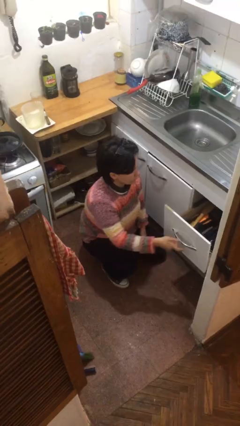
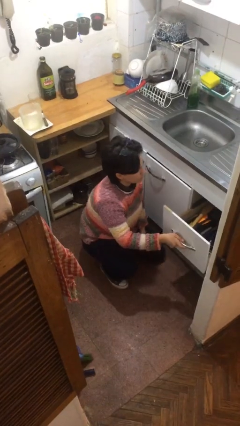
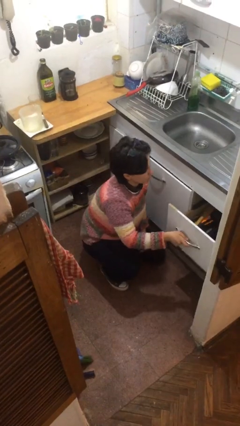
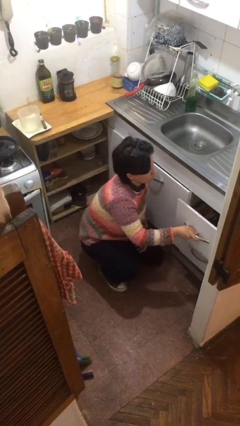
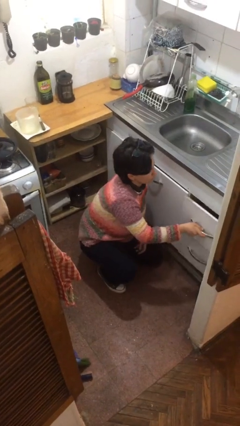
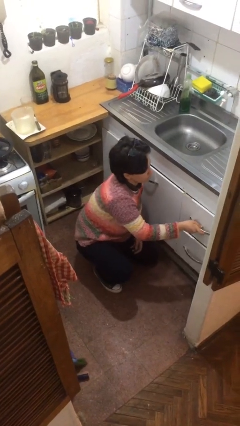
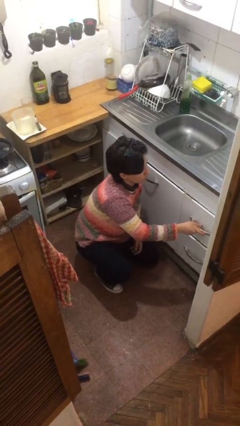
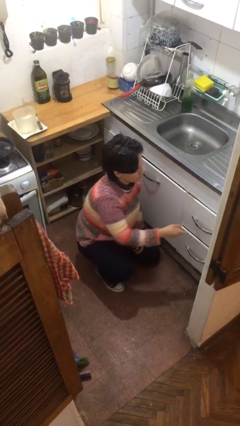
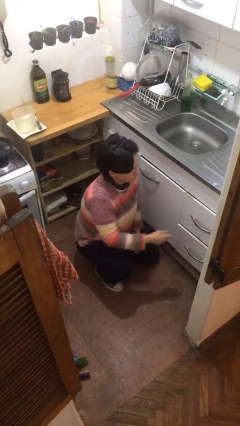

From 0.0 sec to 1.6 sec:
person closes kitchen drawer

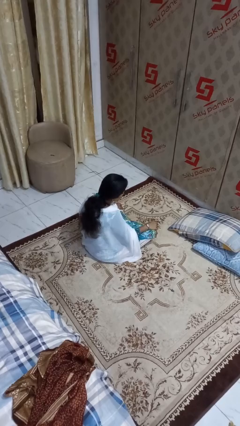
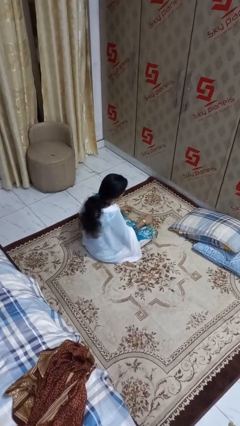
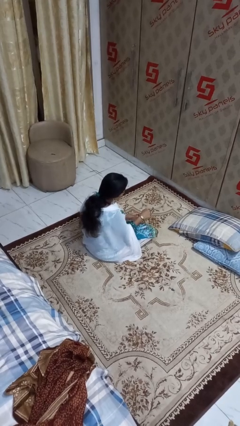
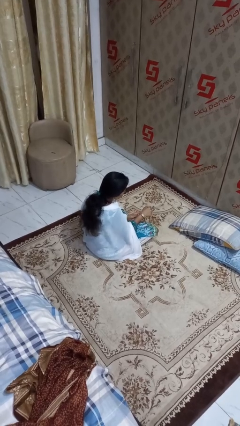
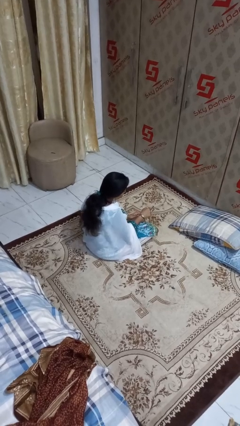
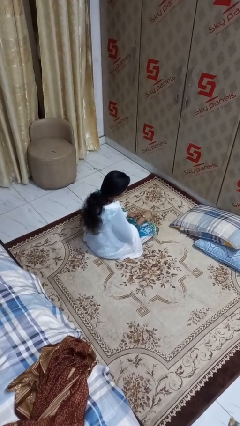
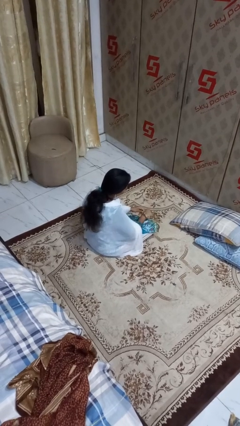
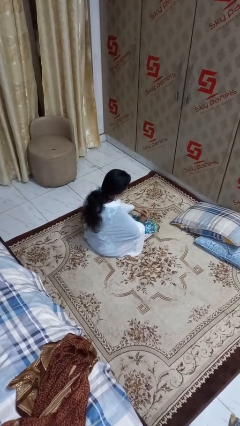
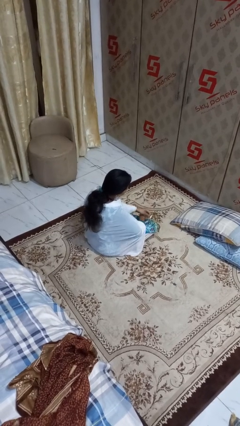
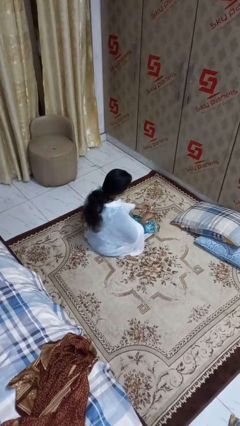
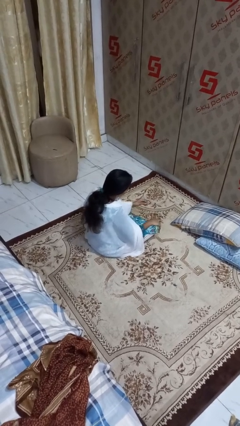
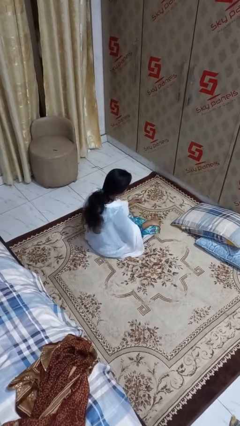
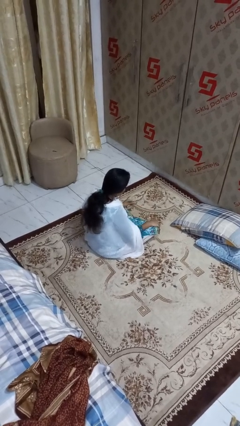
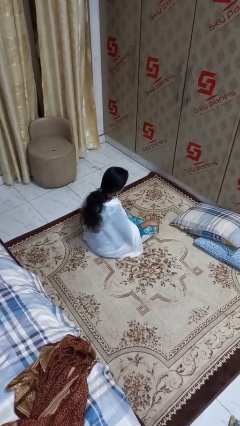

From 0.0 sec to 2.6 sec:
person takes off wristwatch

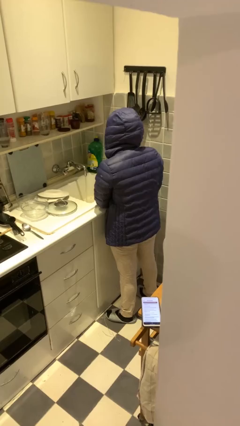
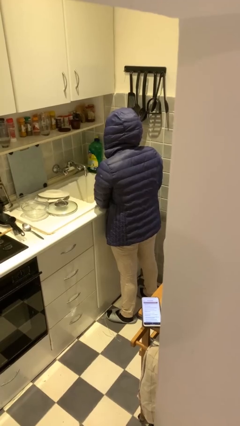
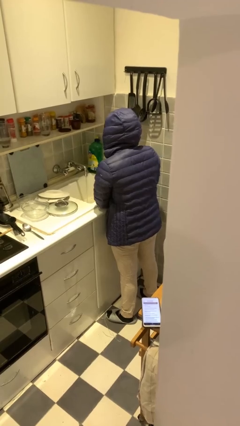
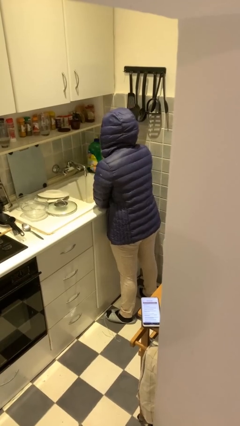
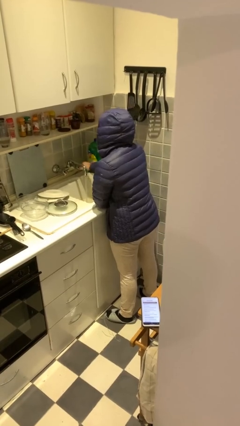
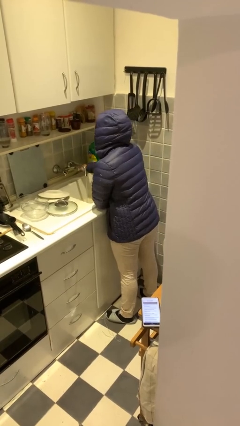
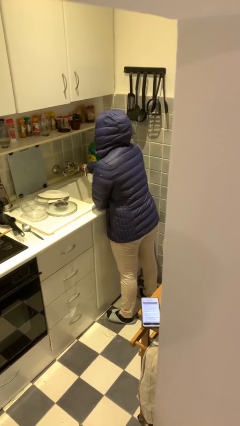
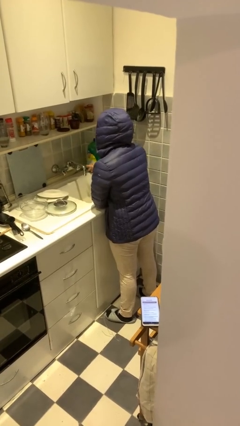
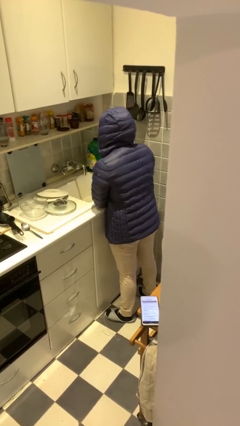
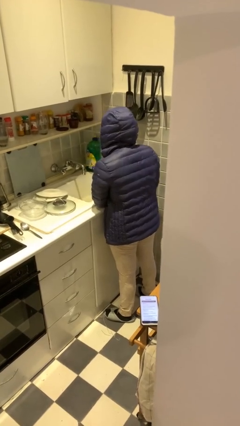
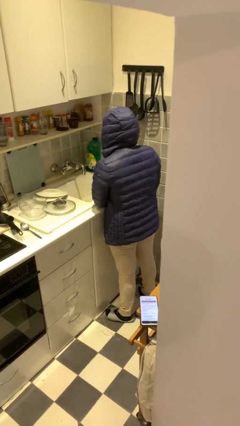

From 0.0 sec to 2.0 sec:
person turns off faucet

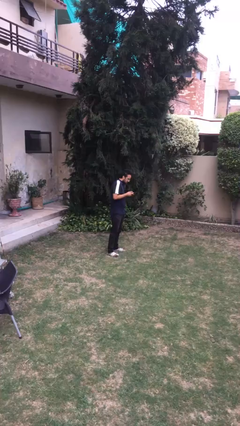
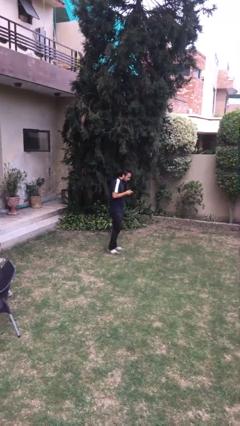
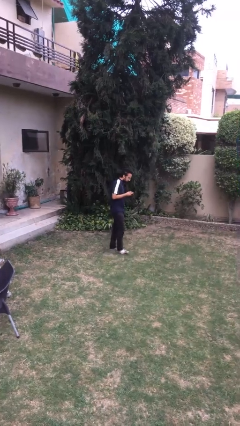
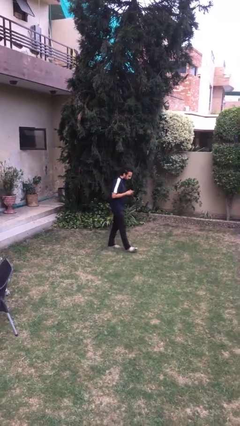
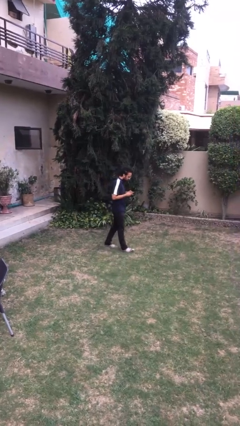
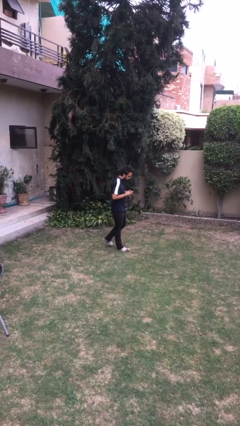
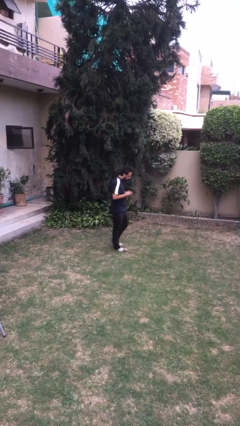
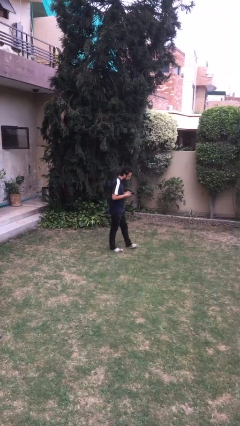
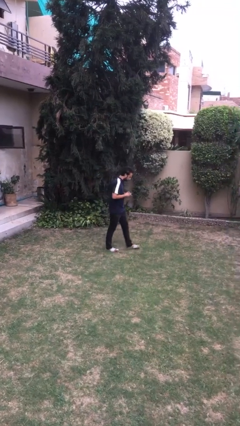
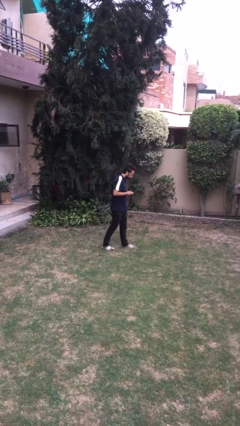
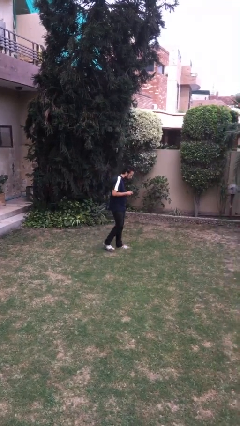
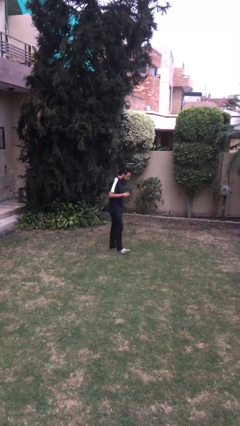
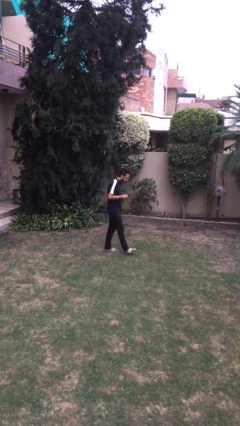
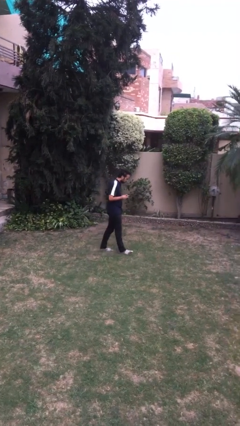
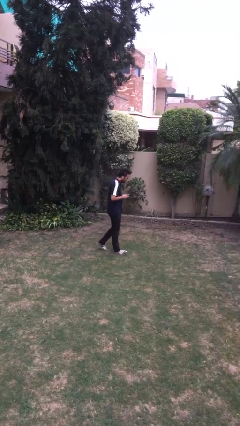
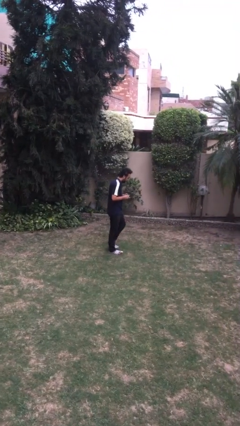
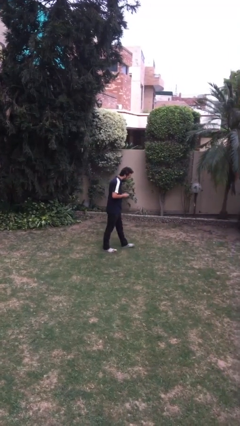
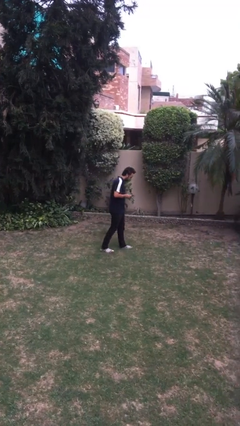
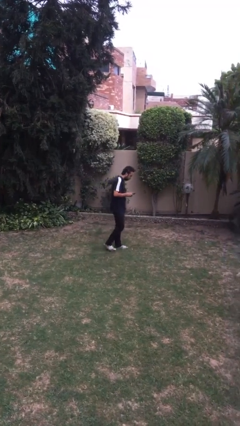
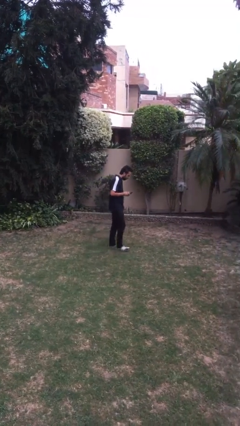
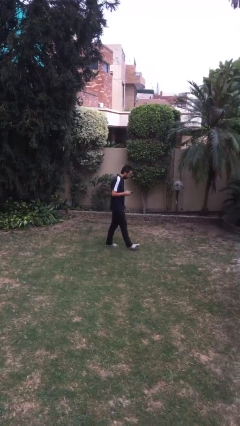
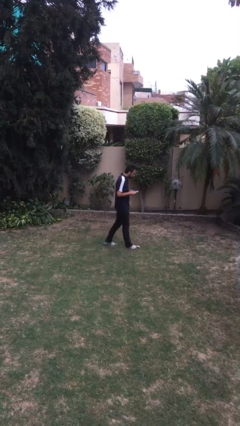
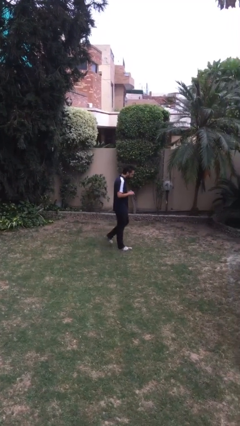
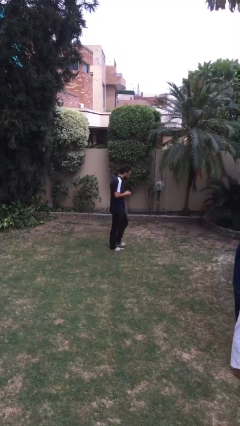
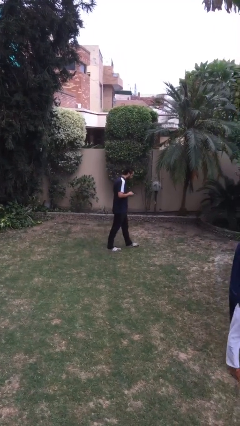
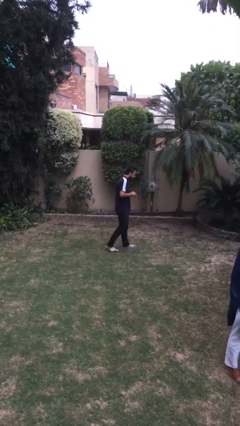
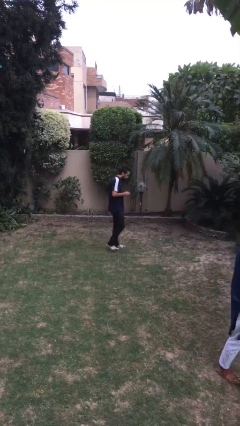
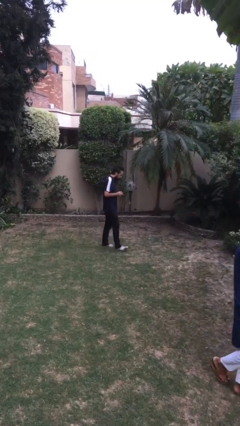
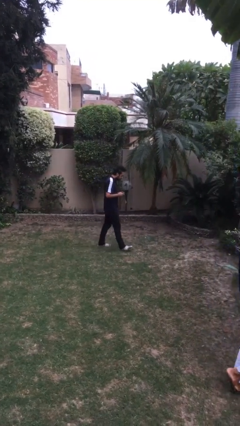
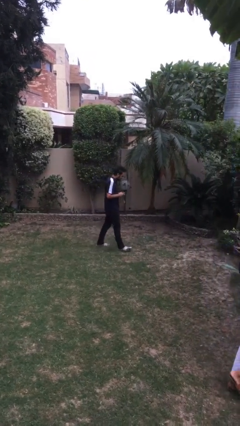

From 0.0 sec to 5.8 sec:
person texts on phone

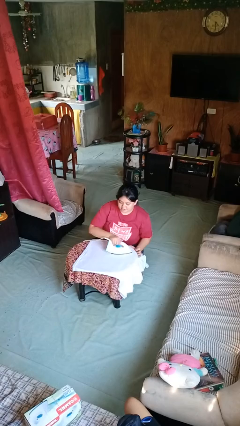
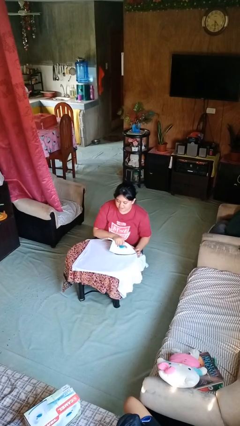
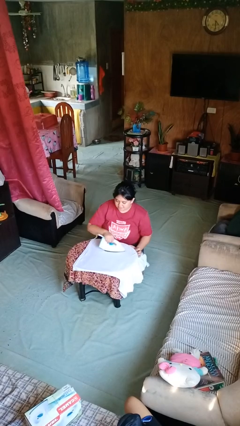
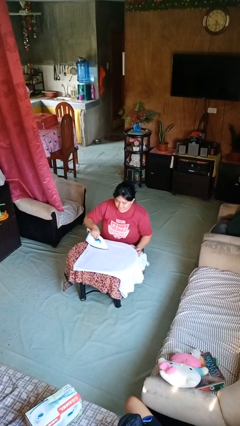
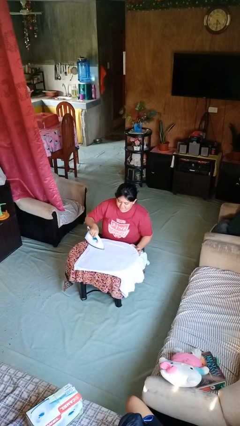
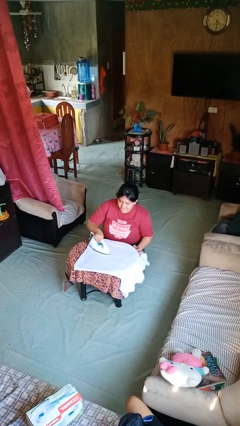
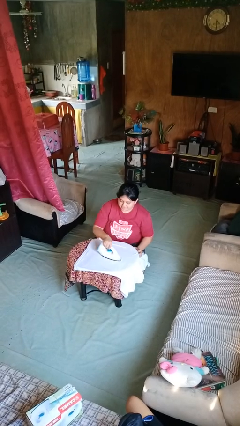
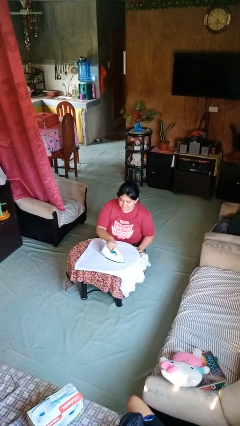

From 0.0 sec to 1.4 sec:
person irons clothes

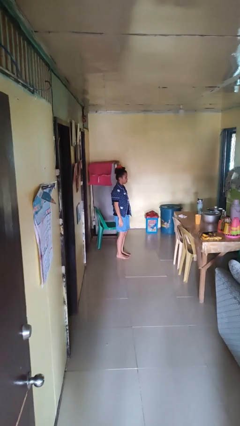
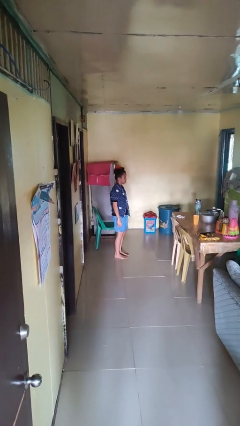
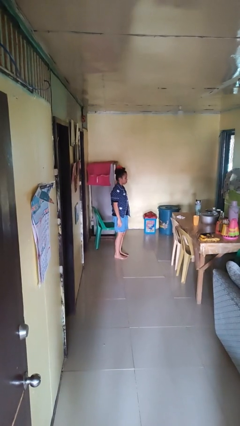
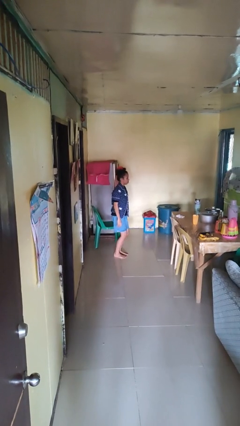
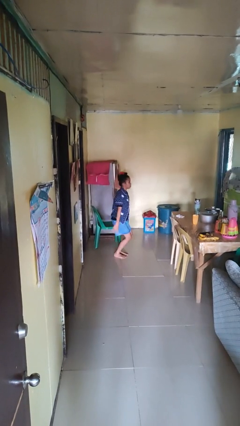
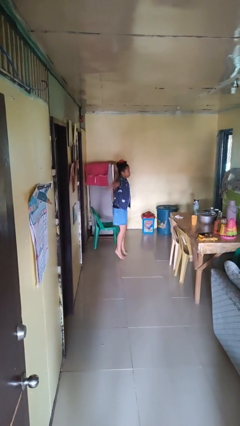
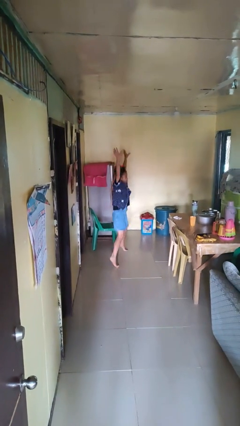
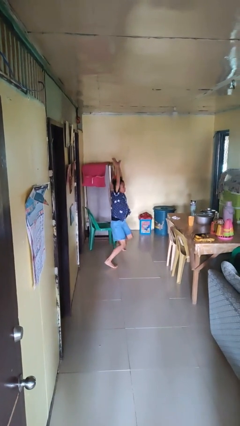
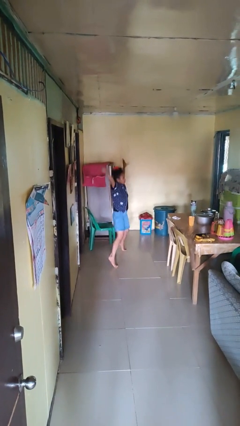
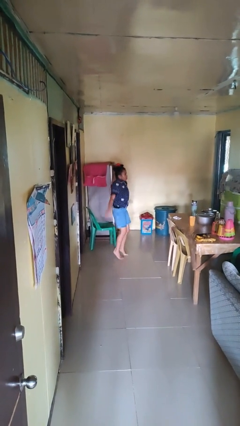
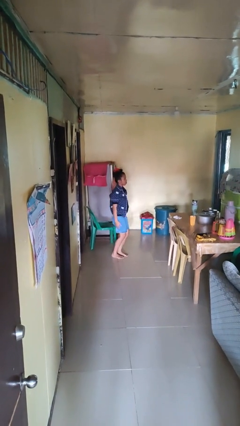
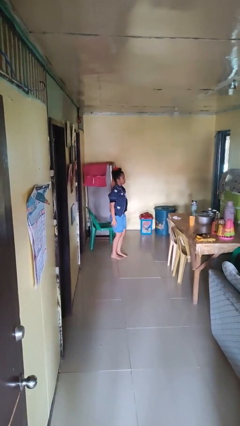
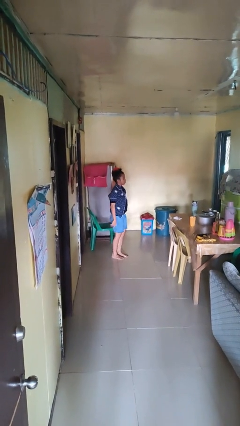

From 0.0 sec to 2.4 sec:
person exercises with jumping jacks

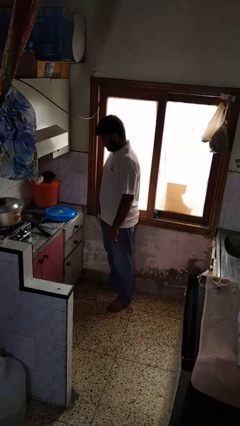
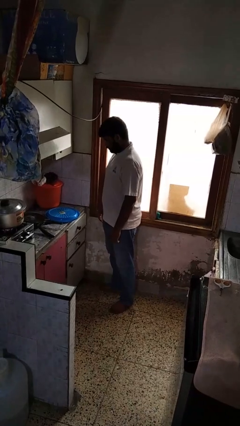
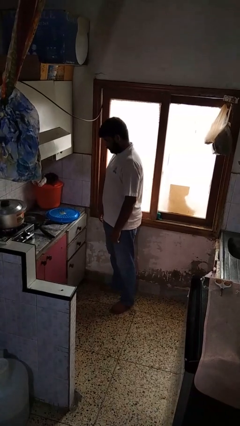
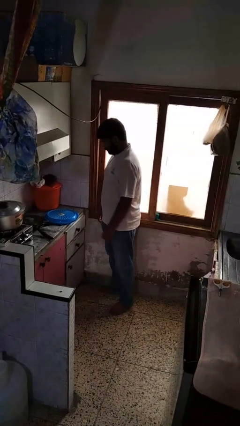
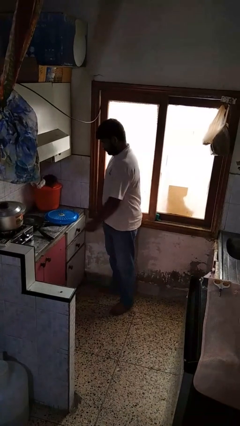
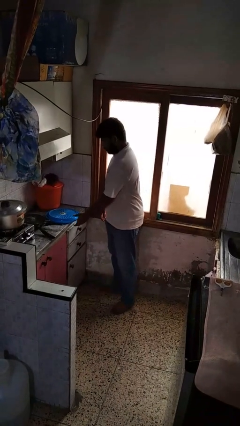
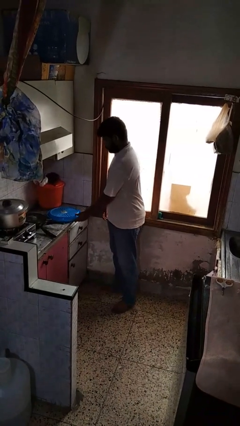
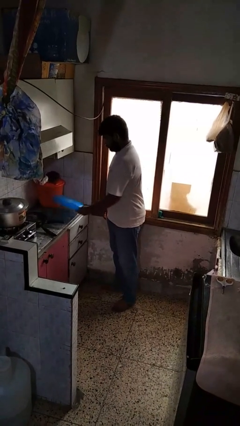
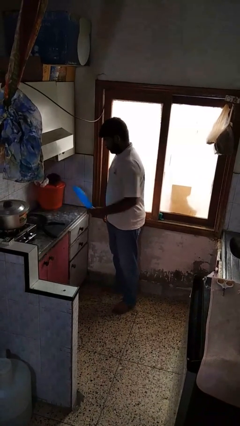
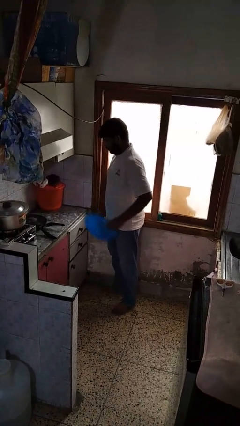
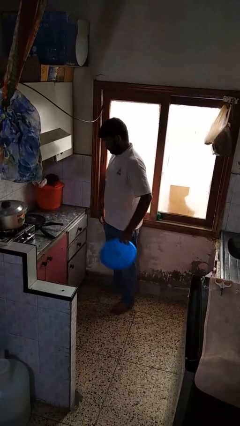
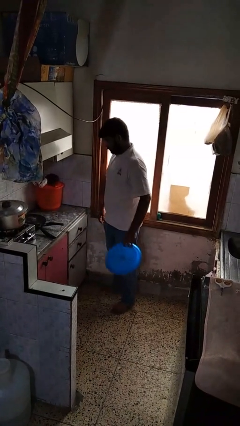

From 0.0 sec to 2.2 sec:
person picks up object from countertop
